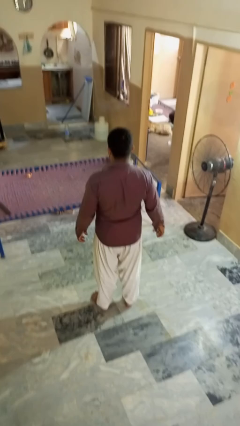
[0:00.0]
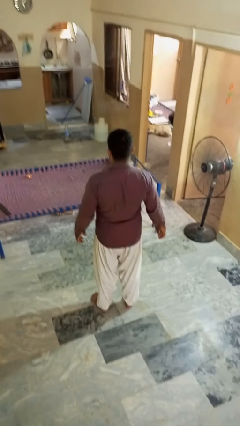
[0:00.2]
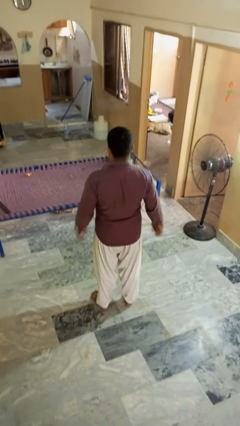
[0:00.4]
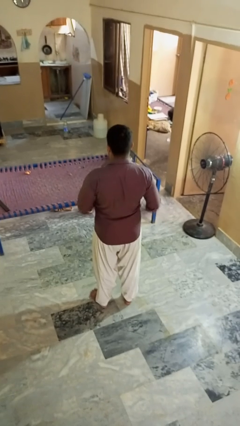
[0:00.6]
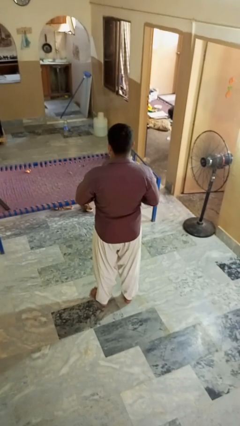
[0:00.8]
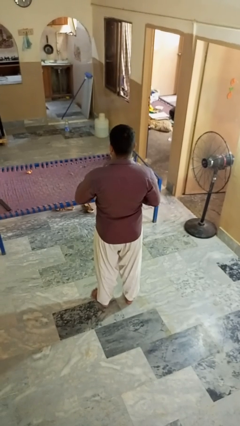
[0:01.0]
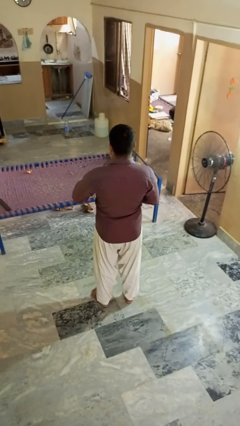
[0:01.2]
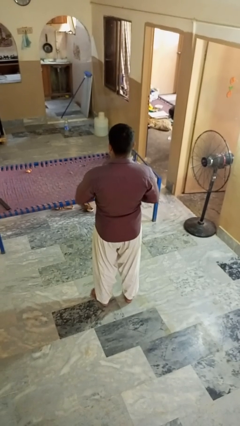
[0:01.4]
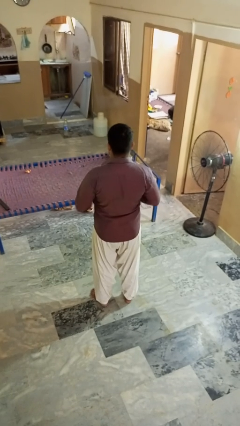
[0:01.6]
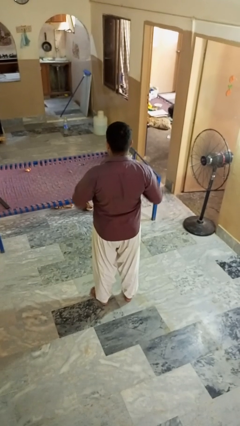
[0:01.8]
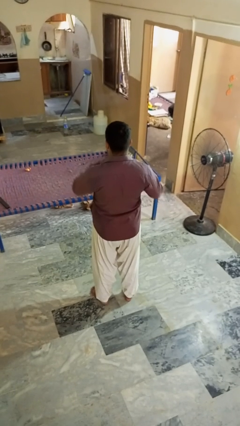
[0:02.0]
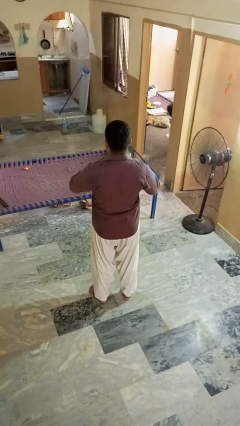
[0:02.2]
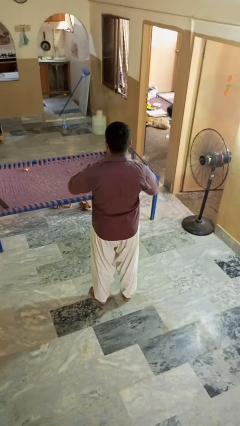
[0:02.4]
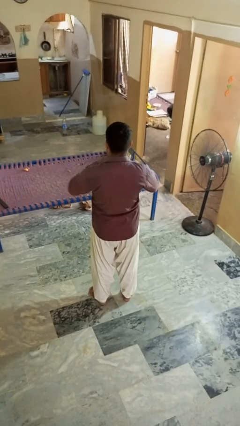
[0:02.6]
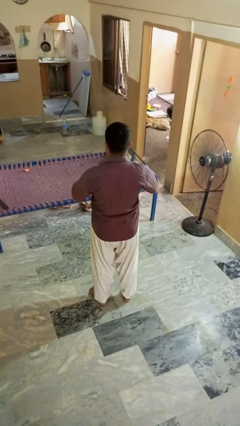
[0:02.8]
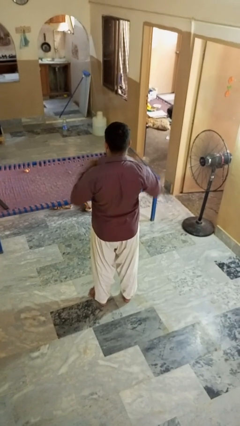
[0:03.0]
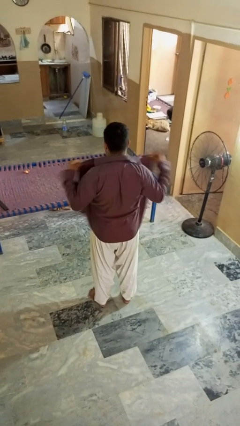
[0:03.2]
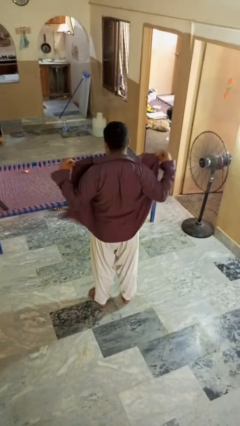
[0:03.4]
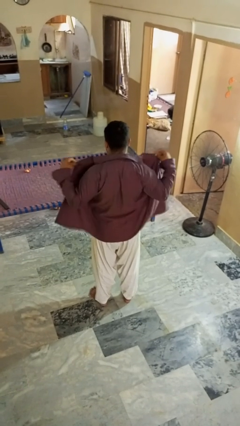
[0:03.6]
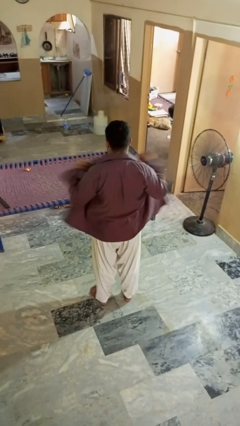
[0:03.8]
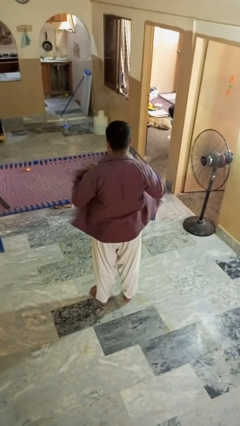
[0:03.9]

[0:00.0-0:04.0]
person unbuttons shirt

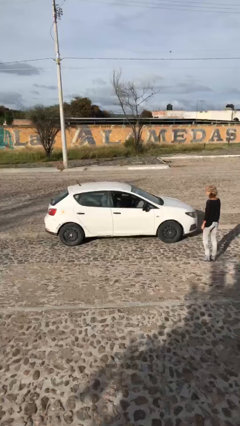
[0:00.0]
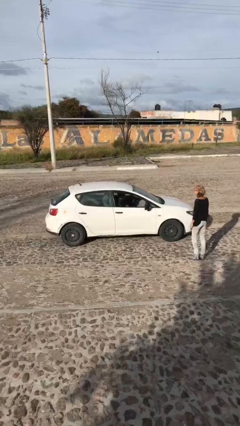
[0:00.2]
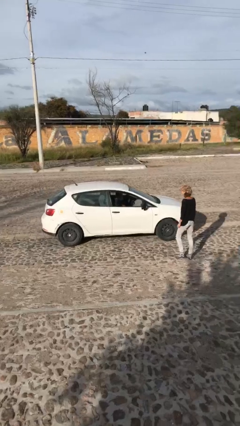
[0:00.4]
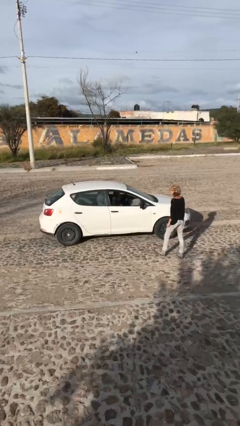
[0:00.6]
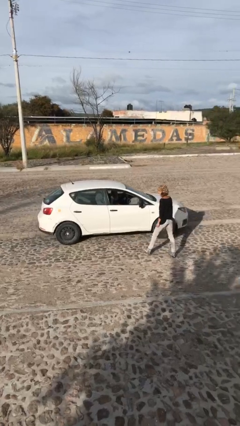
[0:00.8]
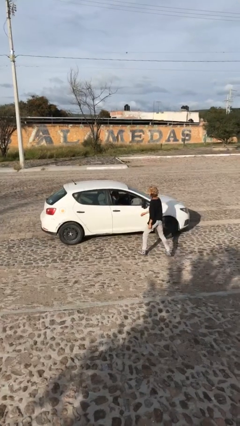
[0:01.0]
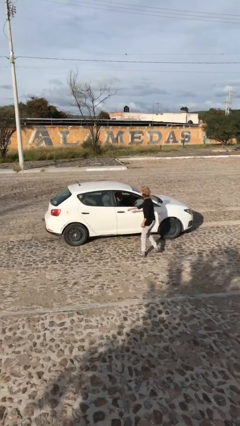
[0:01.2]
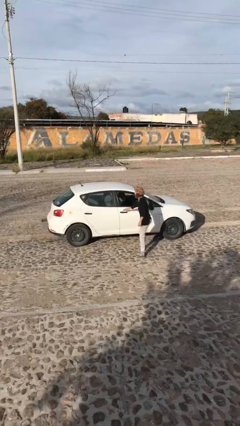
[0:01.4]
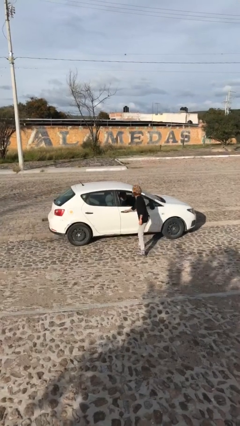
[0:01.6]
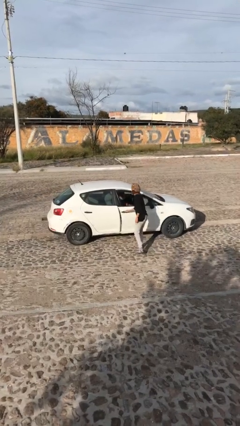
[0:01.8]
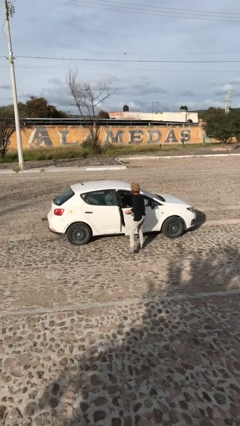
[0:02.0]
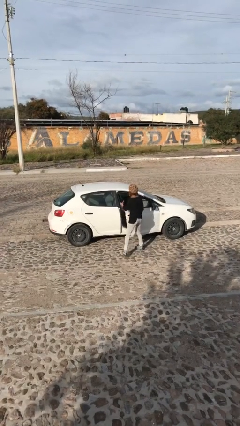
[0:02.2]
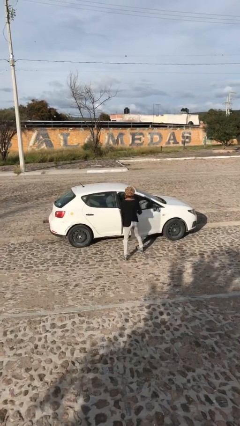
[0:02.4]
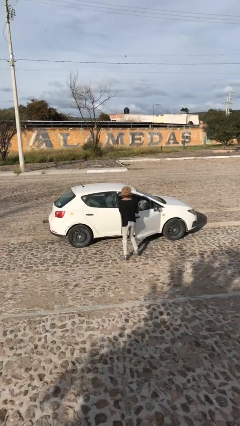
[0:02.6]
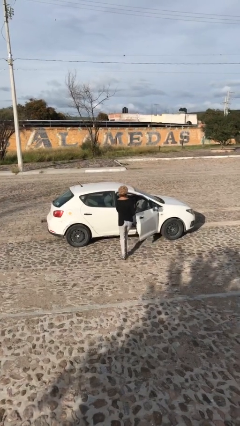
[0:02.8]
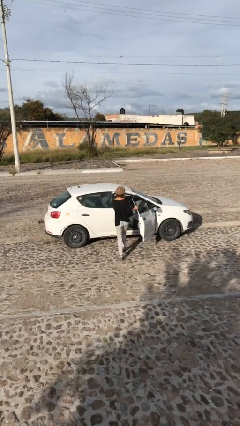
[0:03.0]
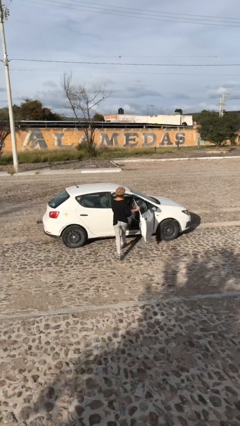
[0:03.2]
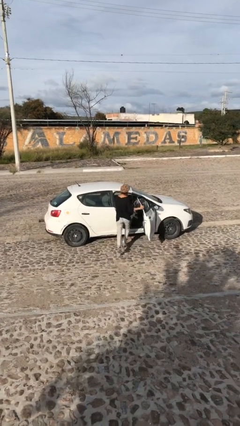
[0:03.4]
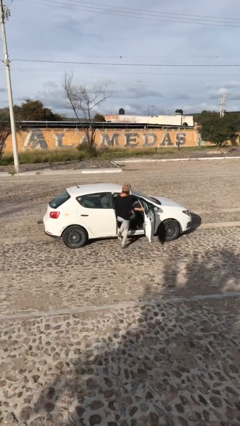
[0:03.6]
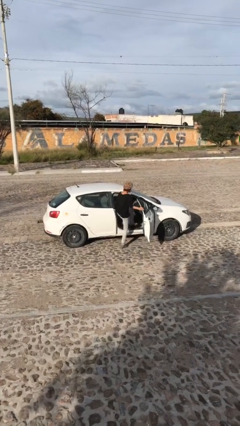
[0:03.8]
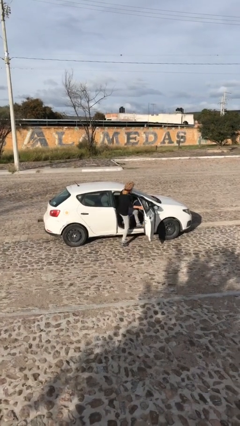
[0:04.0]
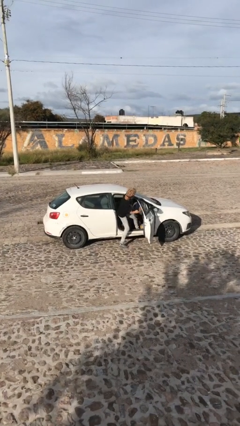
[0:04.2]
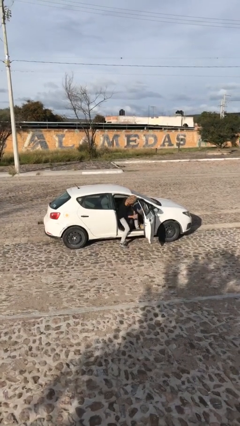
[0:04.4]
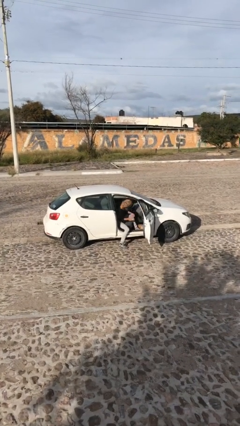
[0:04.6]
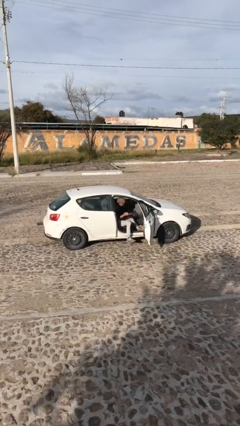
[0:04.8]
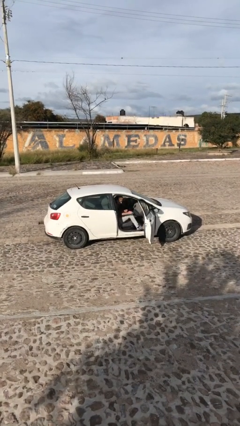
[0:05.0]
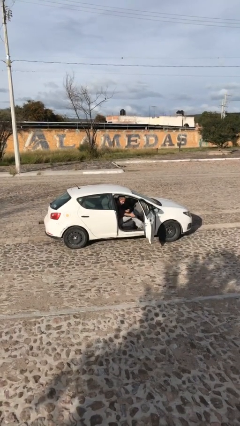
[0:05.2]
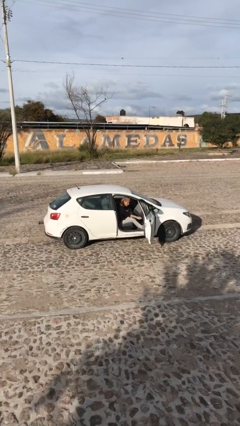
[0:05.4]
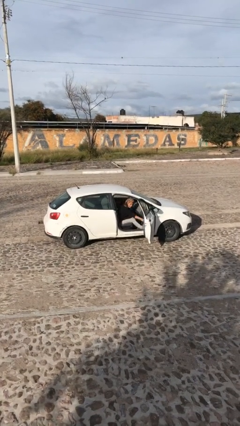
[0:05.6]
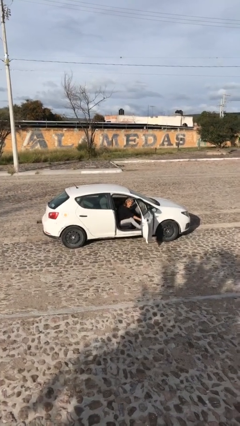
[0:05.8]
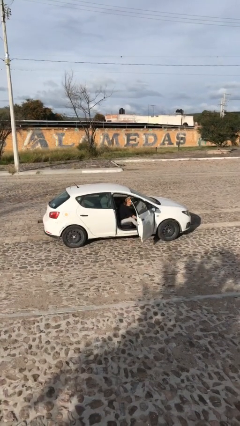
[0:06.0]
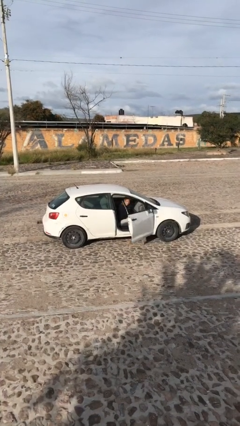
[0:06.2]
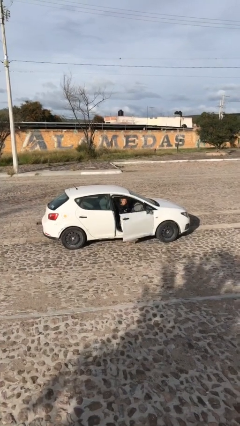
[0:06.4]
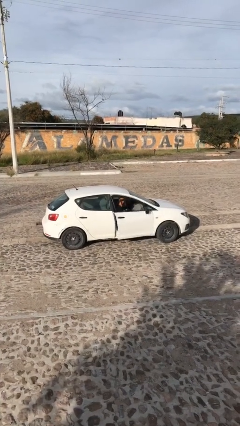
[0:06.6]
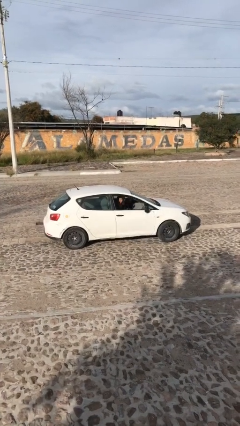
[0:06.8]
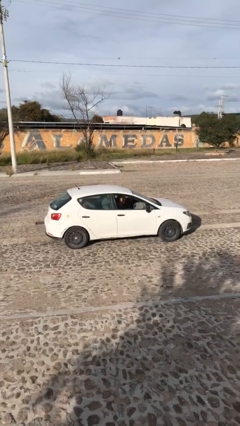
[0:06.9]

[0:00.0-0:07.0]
car picks up person

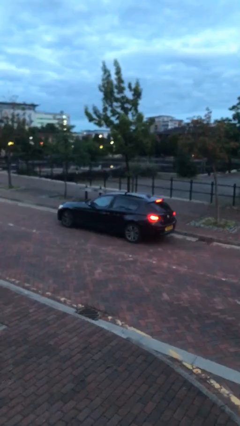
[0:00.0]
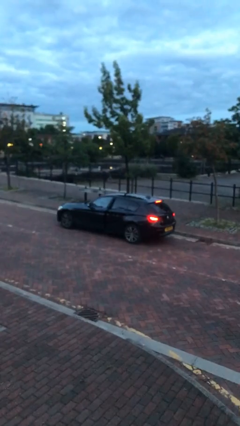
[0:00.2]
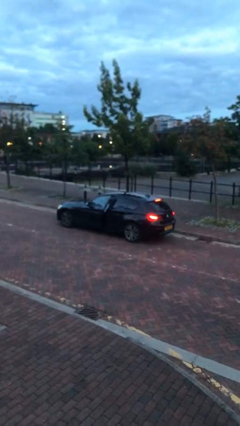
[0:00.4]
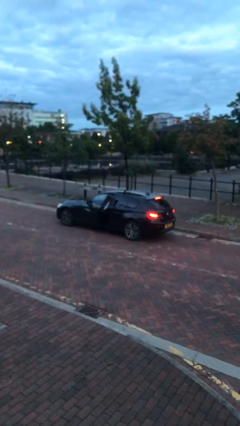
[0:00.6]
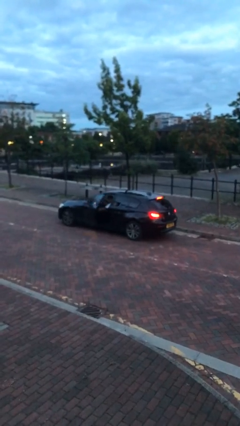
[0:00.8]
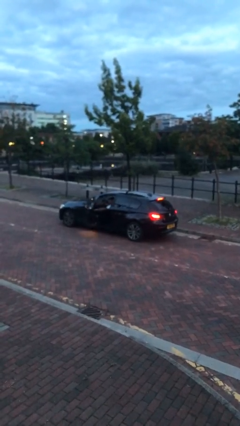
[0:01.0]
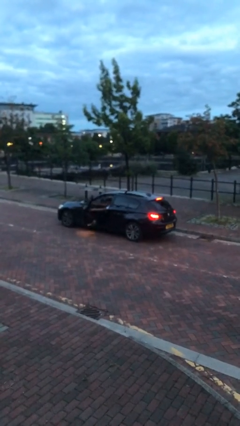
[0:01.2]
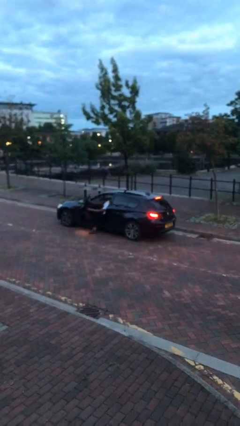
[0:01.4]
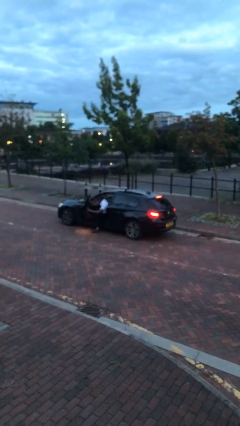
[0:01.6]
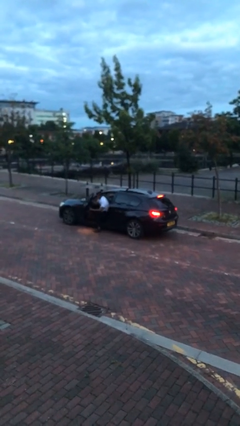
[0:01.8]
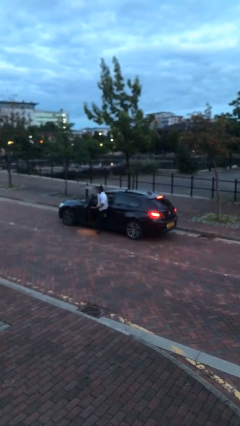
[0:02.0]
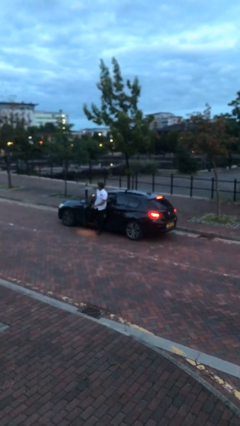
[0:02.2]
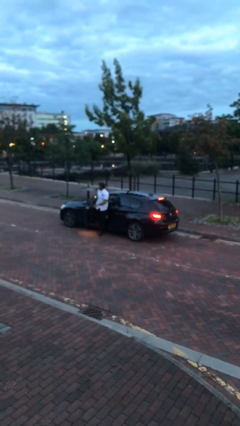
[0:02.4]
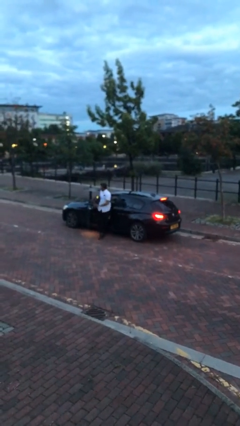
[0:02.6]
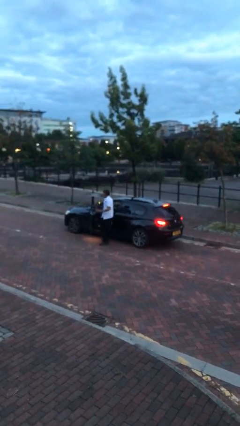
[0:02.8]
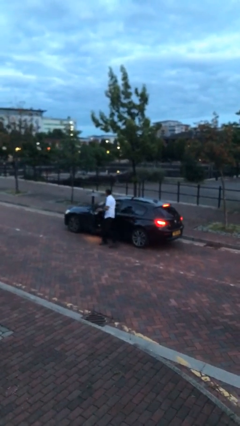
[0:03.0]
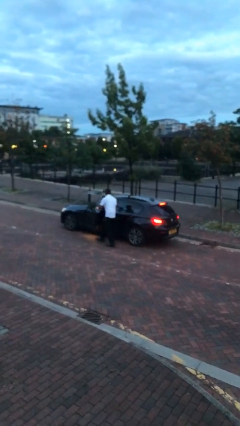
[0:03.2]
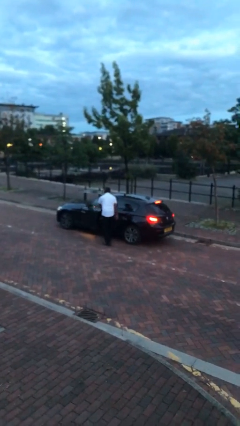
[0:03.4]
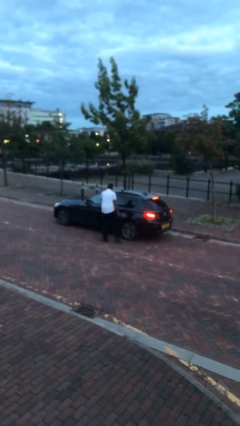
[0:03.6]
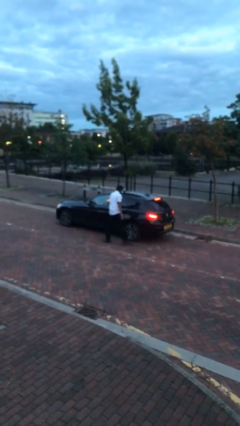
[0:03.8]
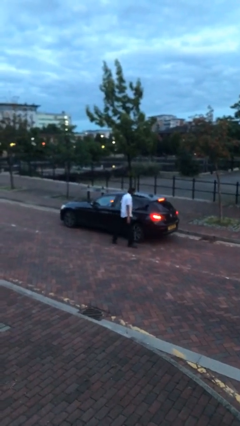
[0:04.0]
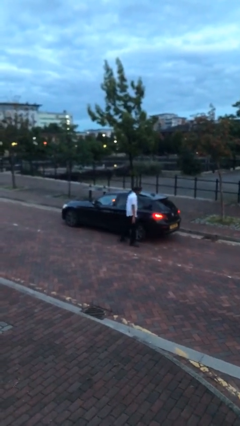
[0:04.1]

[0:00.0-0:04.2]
car drops off person

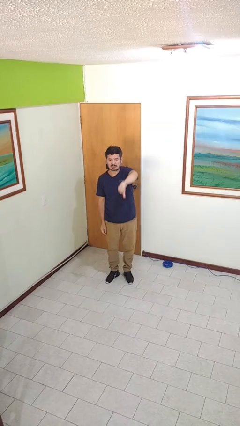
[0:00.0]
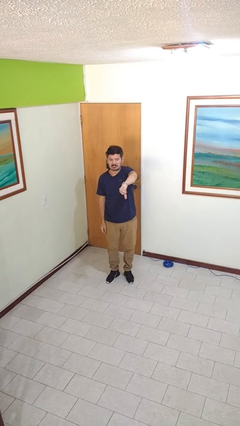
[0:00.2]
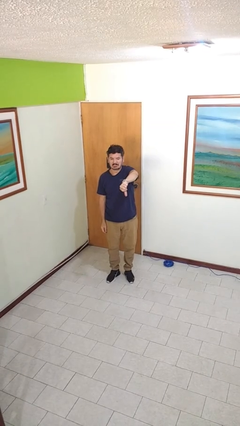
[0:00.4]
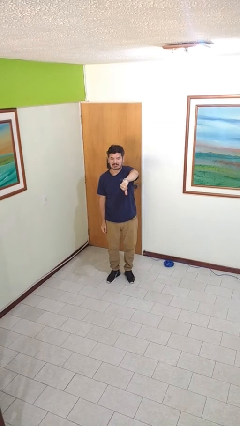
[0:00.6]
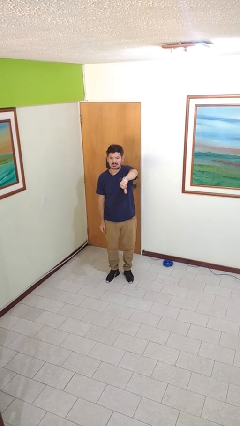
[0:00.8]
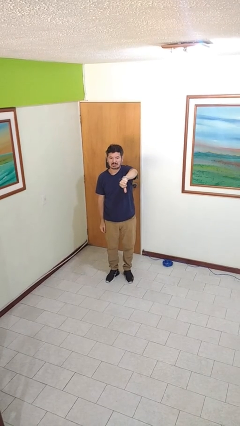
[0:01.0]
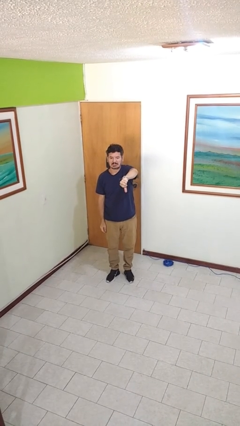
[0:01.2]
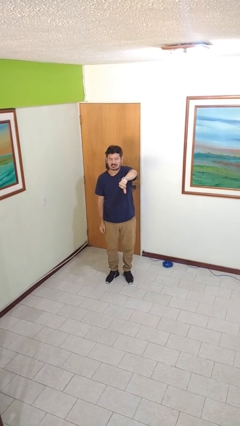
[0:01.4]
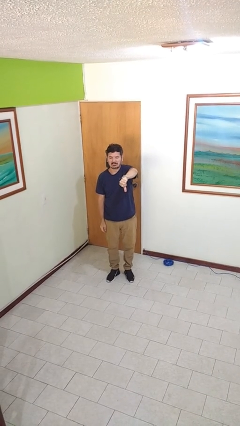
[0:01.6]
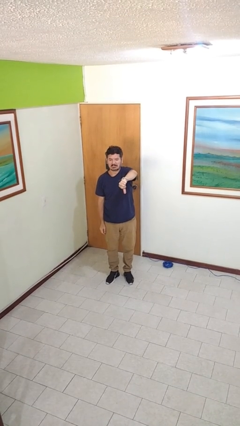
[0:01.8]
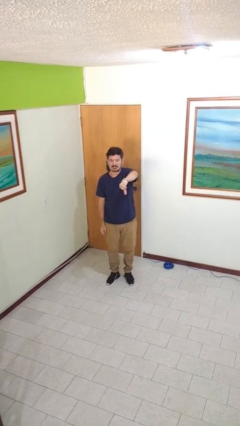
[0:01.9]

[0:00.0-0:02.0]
person gestures thumbs down

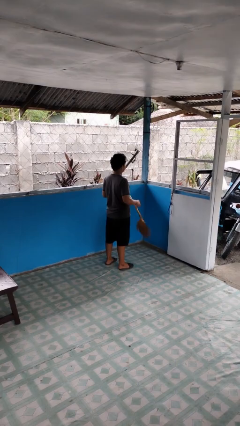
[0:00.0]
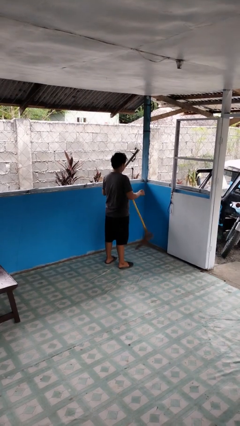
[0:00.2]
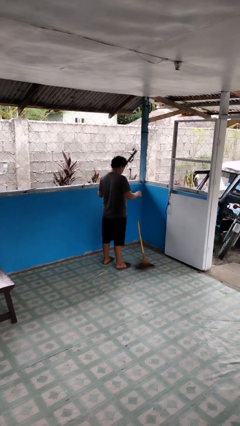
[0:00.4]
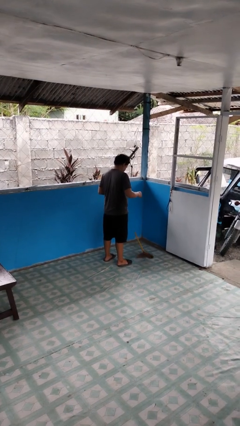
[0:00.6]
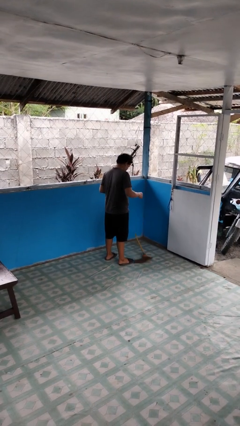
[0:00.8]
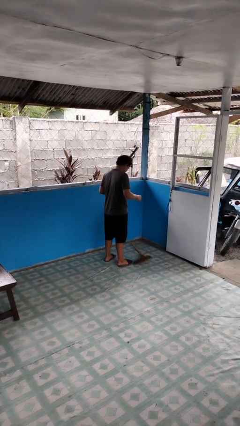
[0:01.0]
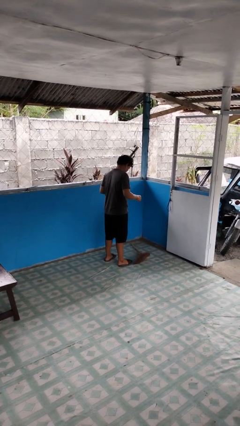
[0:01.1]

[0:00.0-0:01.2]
person drops object
